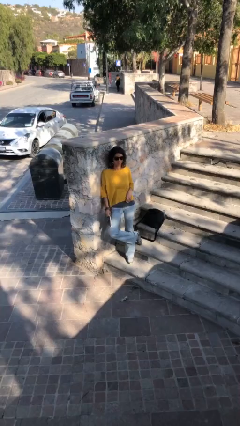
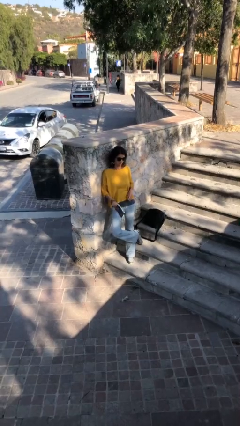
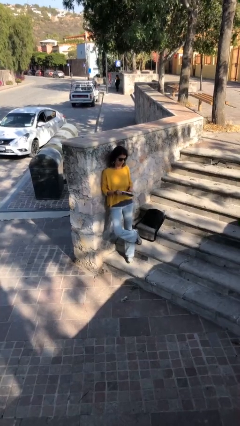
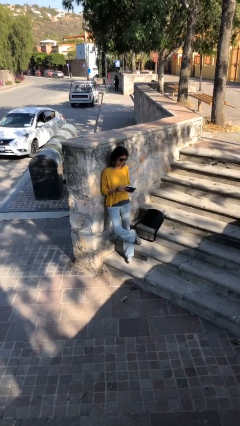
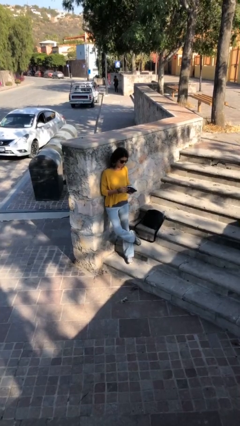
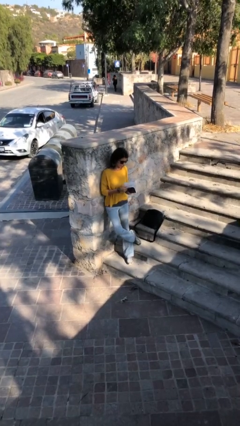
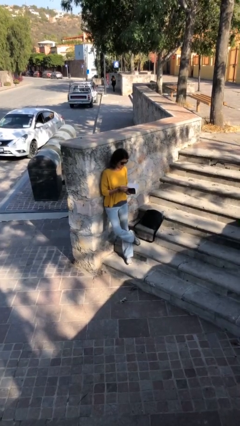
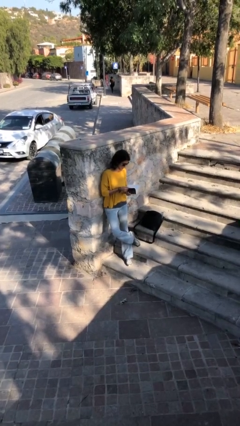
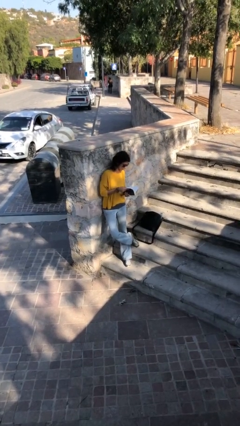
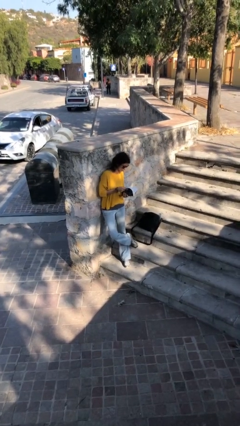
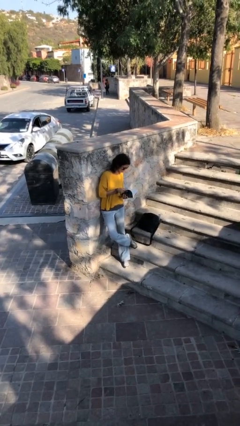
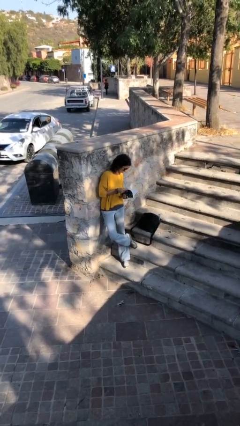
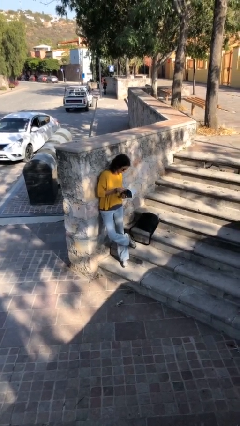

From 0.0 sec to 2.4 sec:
person reads document

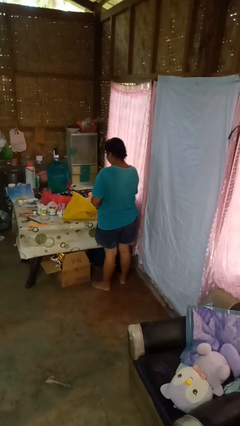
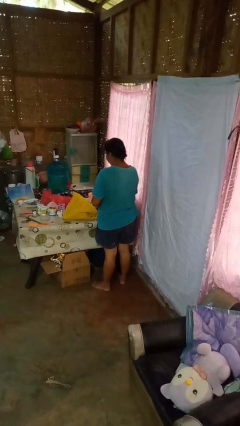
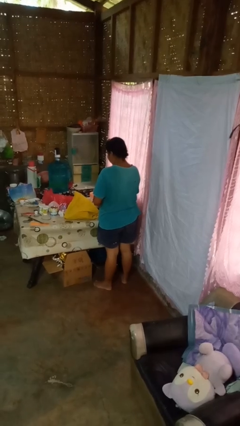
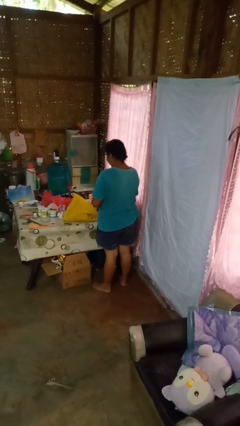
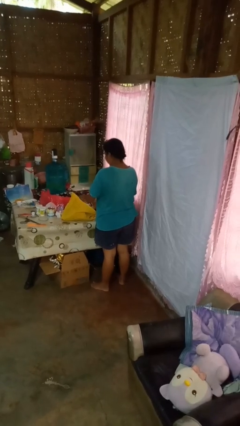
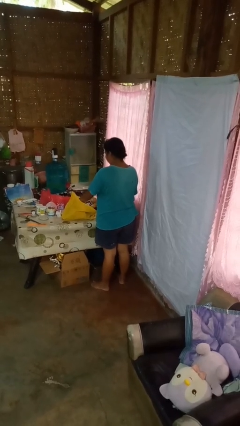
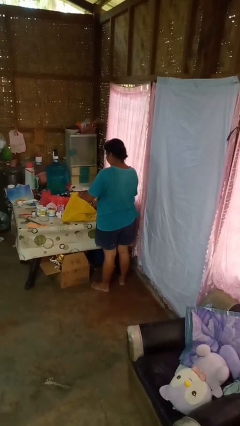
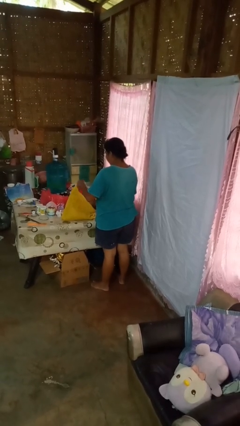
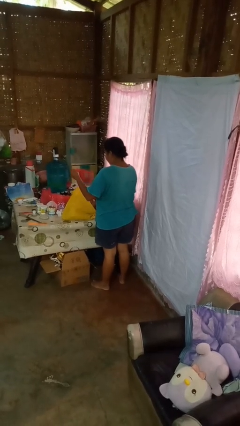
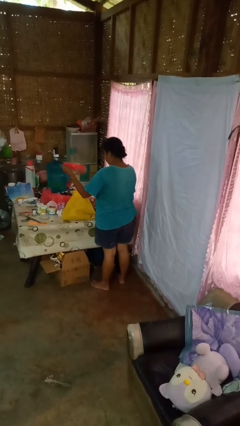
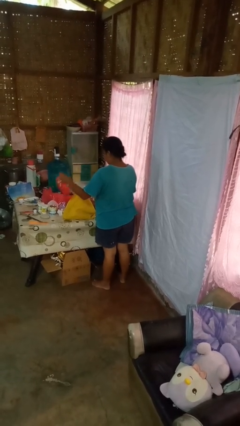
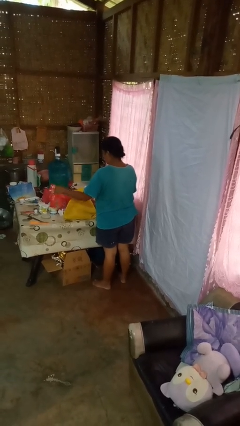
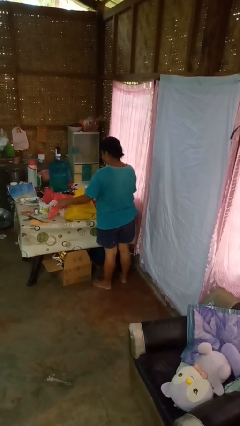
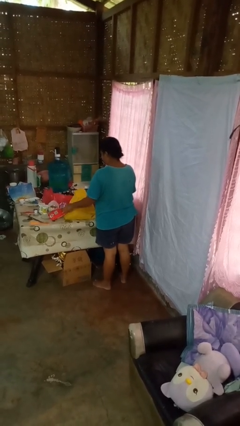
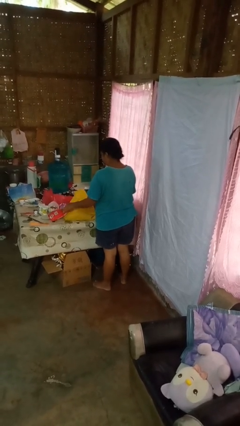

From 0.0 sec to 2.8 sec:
person takes object from bag

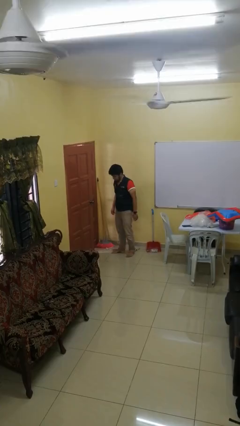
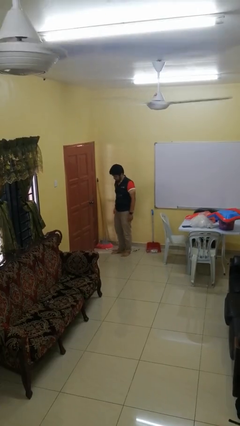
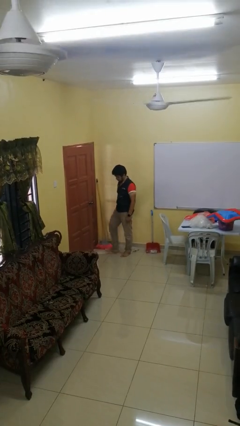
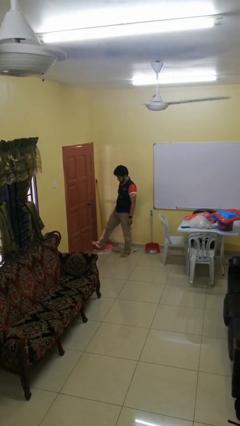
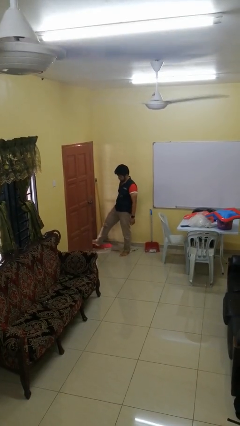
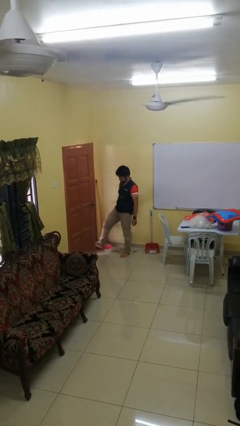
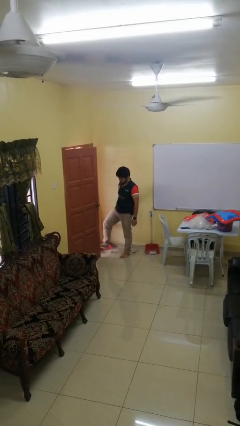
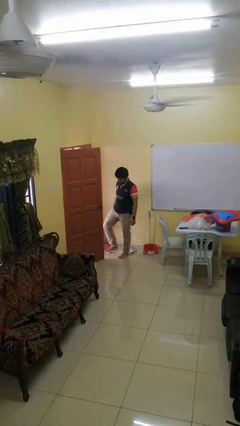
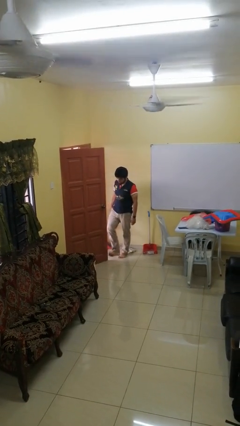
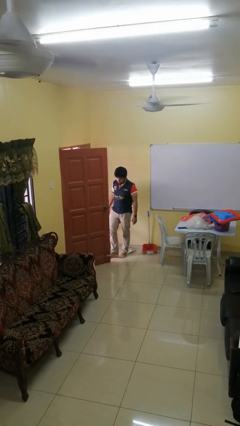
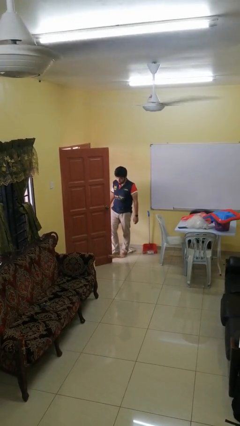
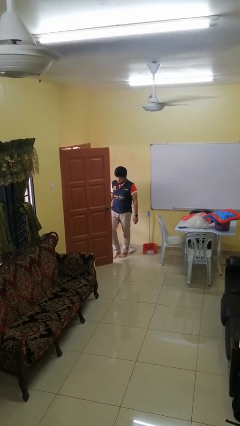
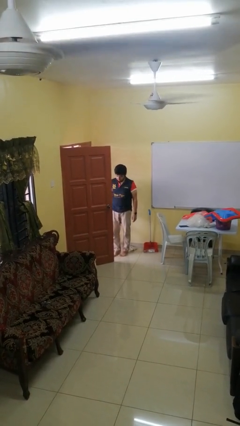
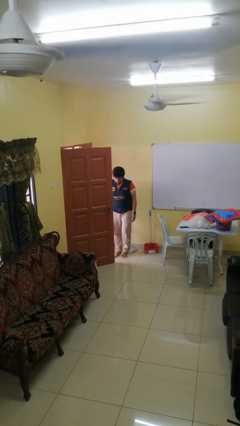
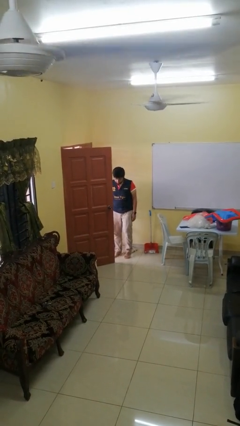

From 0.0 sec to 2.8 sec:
person opens facility door

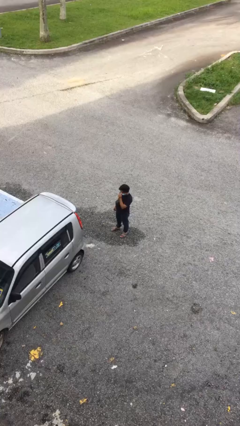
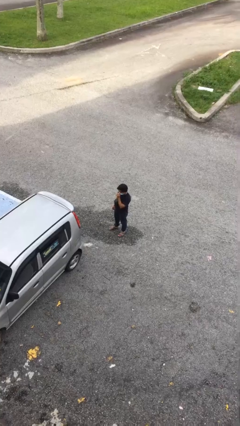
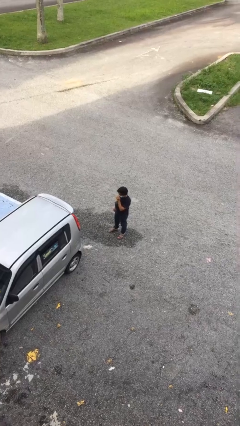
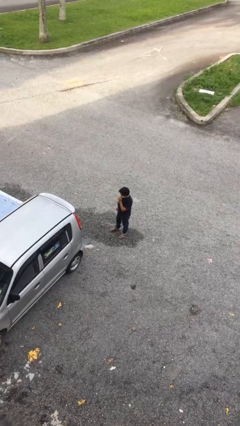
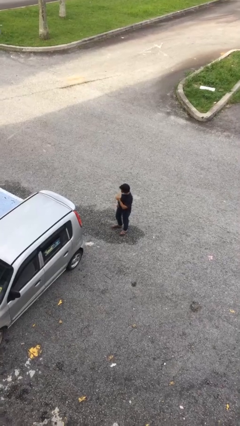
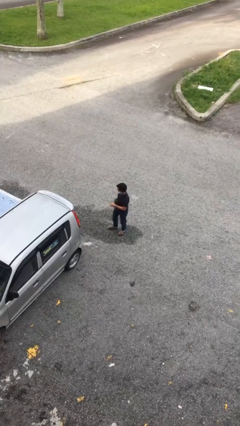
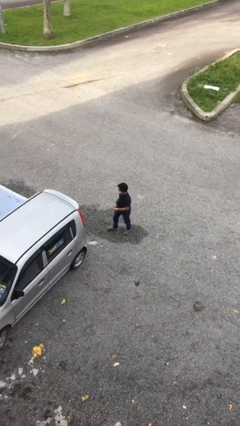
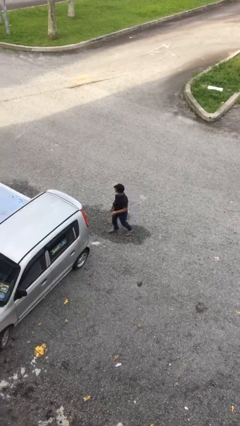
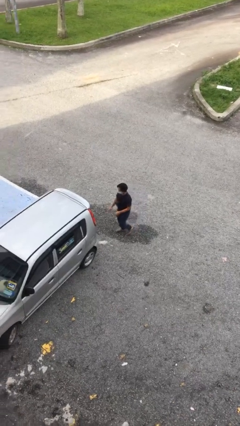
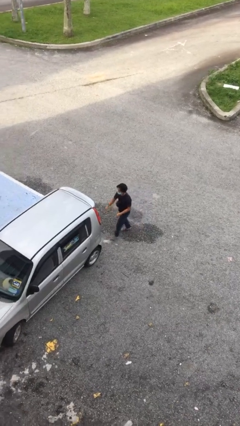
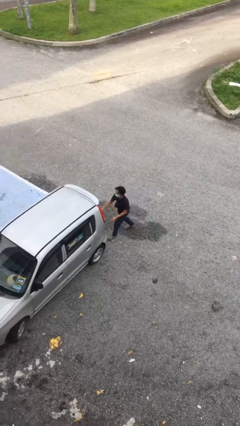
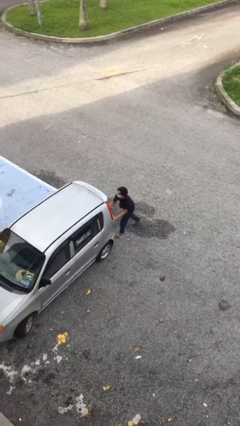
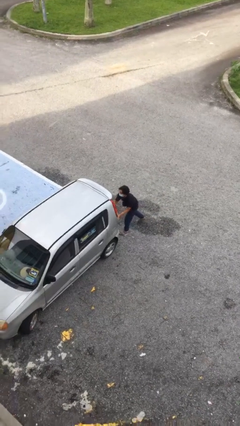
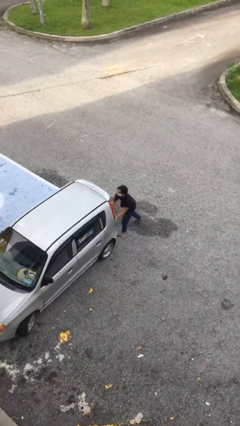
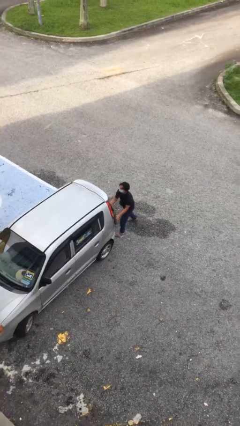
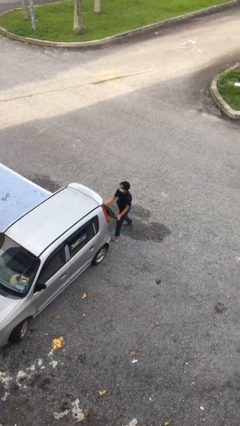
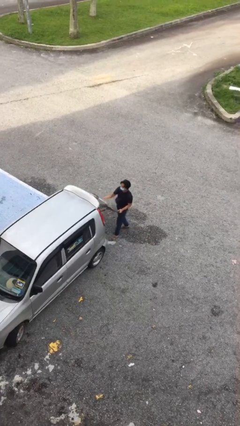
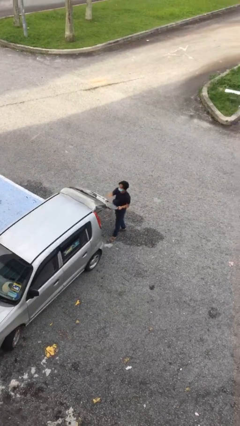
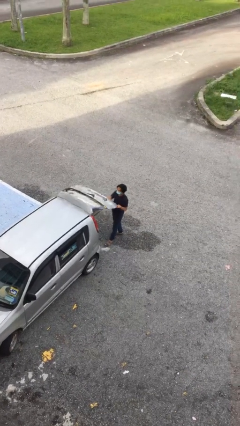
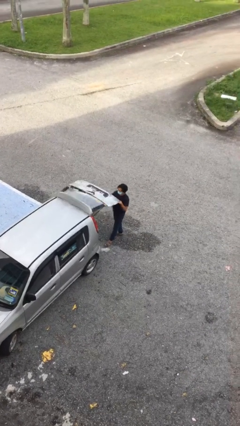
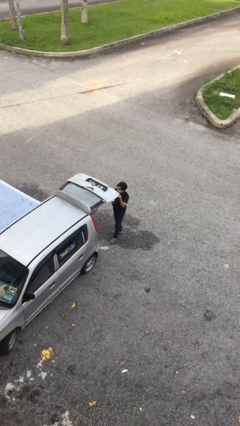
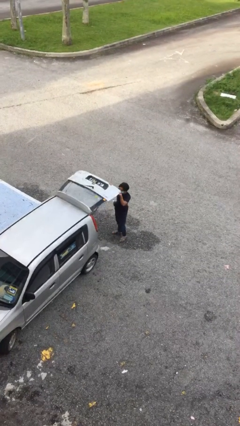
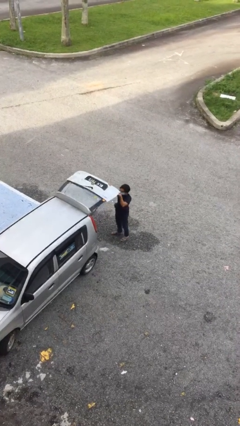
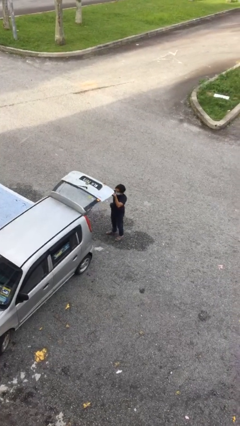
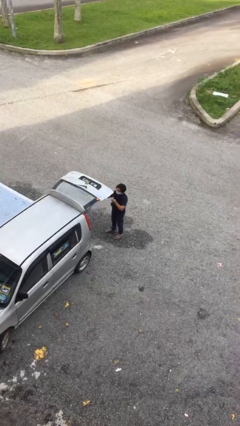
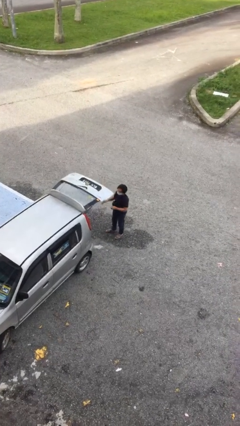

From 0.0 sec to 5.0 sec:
person opens car trunk

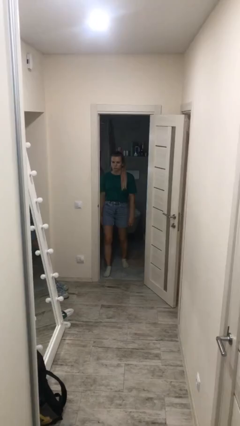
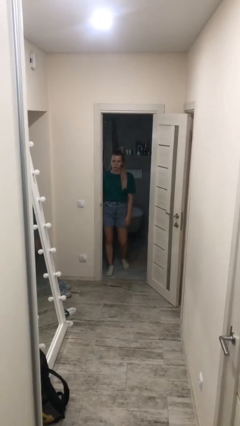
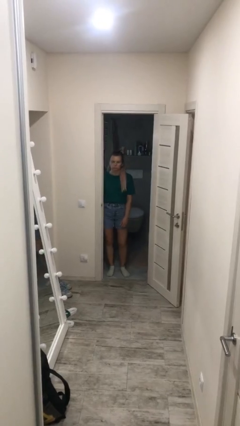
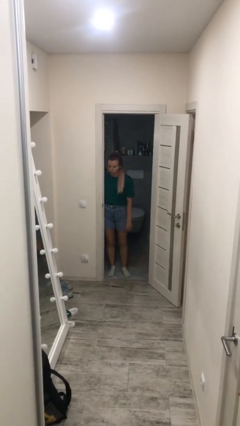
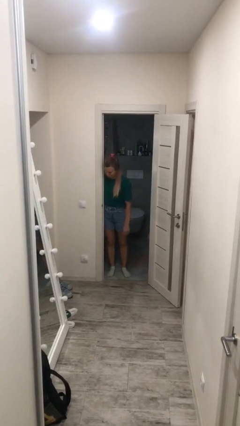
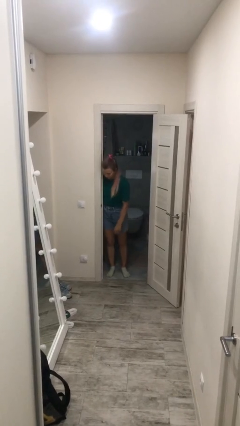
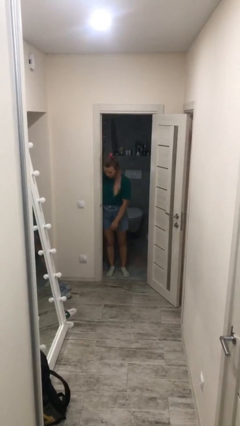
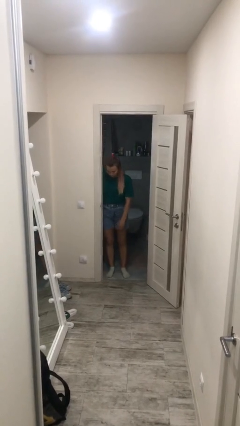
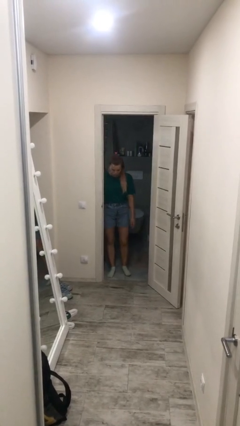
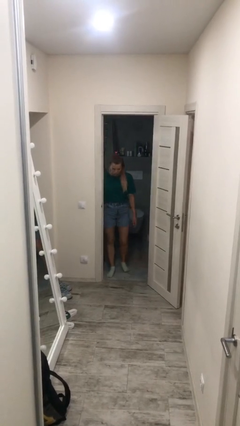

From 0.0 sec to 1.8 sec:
person bumps into wall

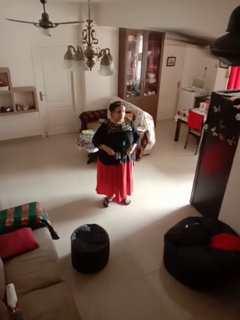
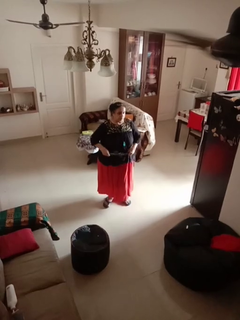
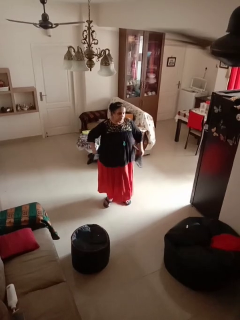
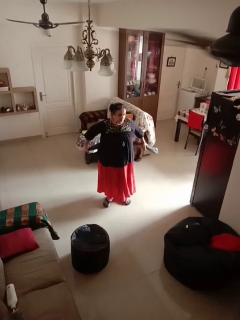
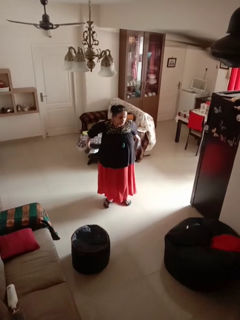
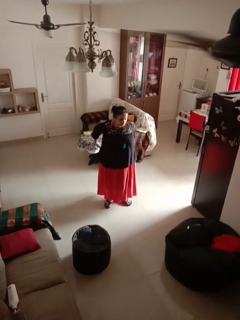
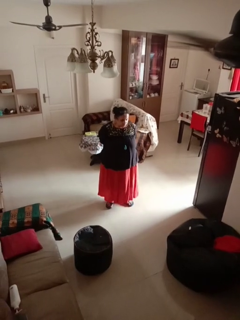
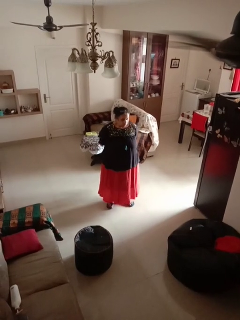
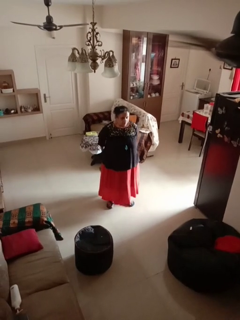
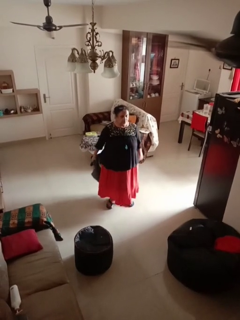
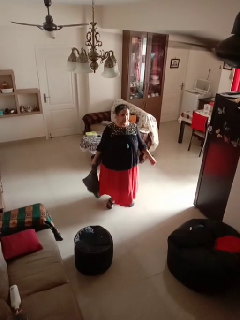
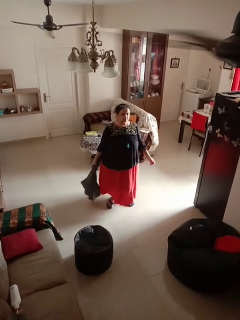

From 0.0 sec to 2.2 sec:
person unties jacket around waist

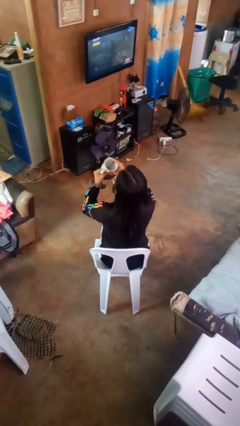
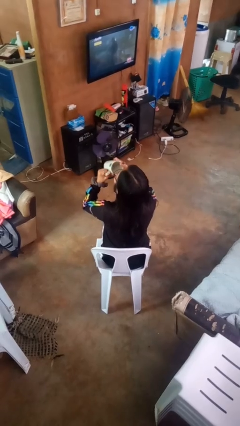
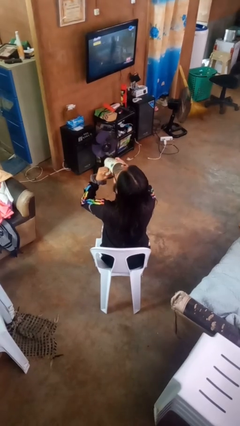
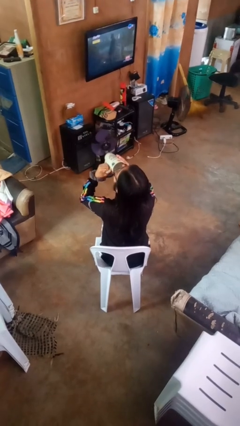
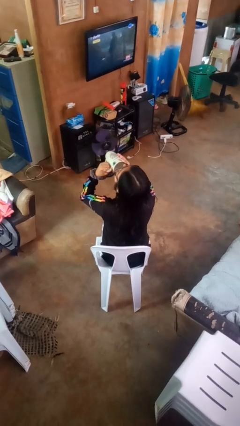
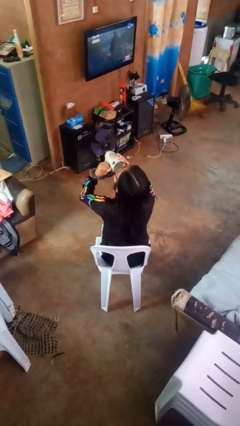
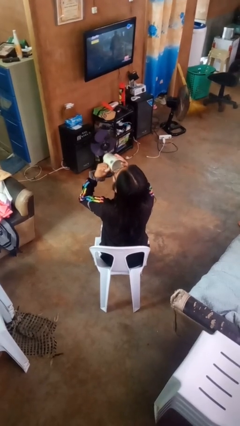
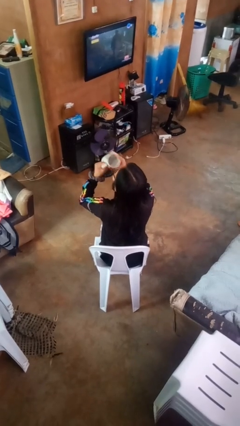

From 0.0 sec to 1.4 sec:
person drinks from mug
